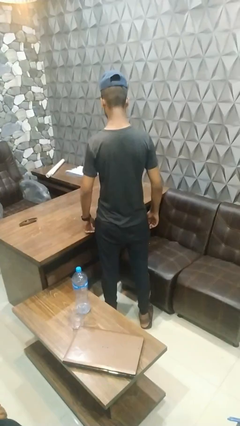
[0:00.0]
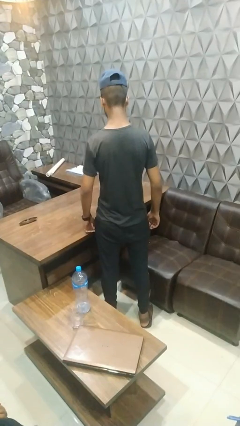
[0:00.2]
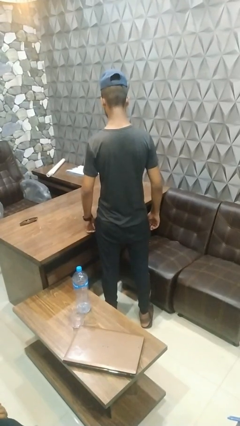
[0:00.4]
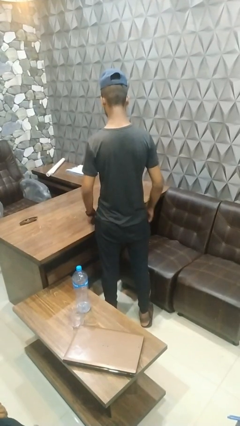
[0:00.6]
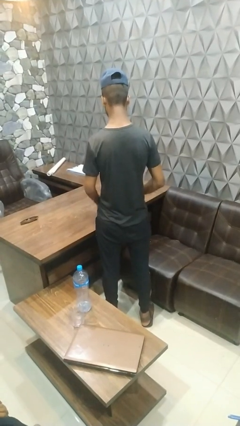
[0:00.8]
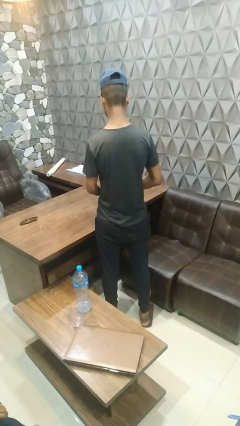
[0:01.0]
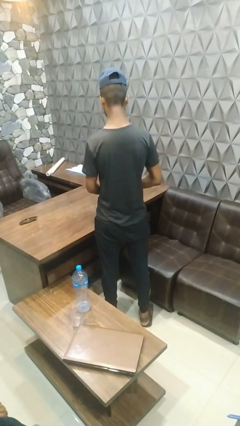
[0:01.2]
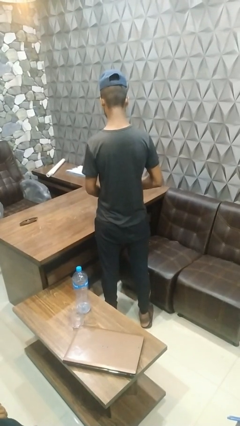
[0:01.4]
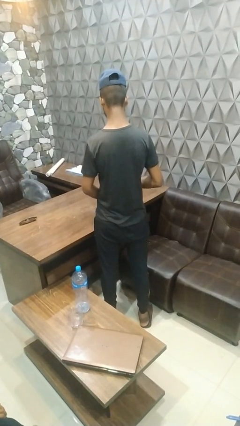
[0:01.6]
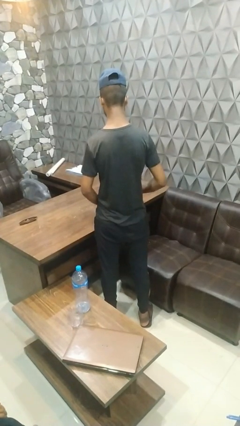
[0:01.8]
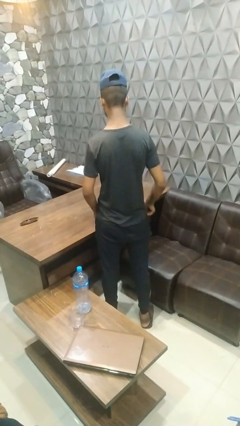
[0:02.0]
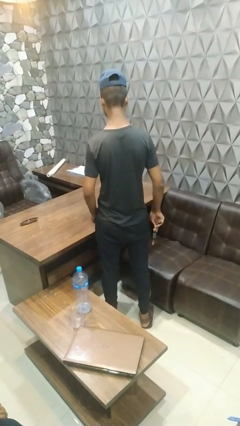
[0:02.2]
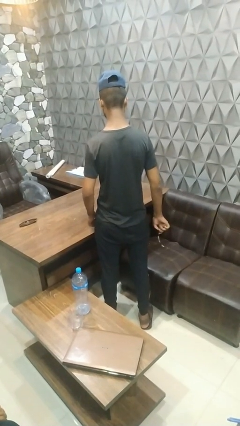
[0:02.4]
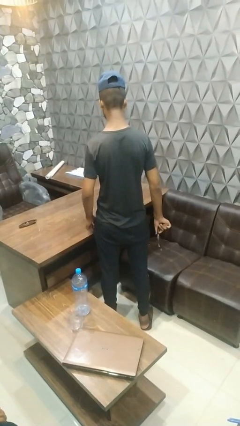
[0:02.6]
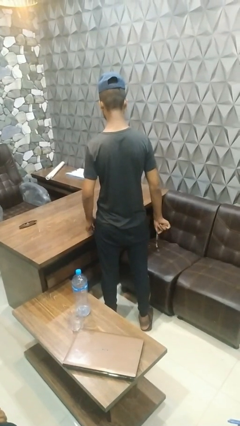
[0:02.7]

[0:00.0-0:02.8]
person takes off wristwatch

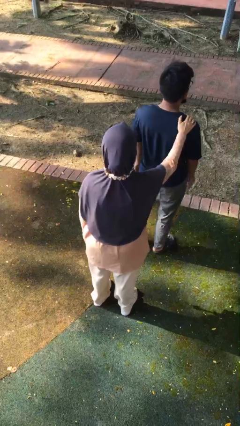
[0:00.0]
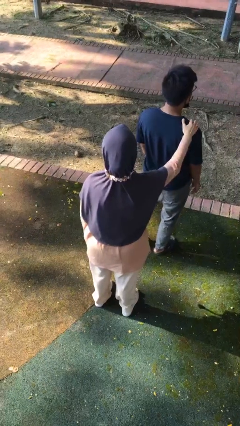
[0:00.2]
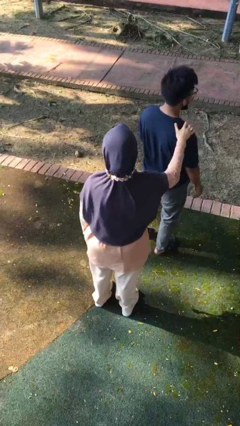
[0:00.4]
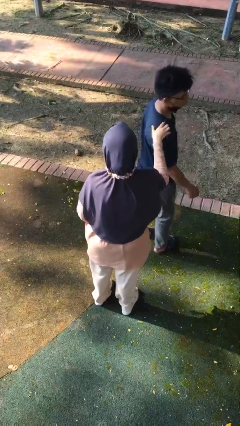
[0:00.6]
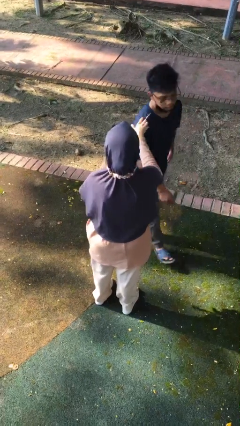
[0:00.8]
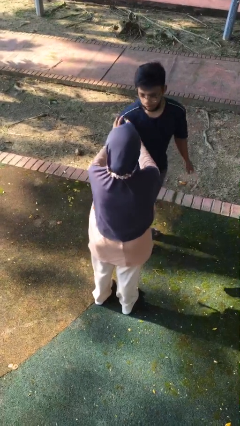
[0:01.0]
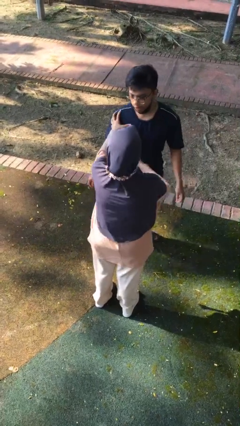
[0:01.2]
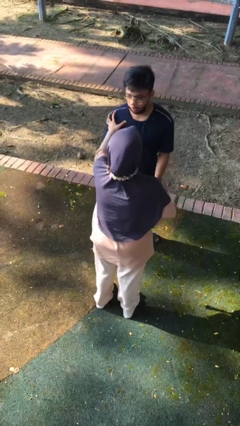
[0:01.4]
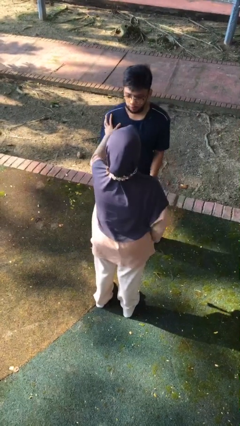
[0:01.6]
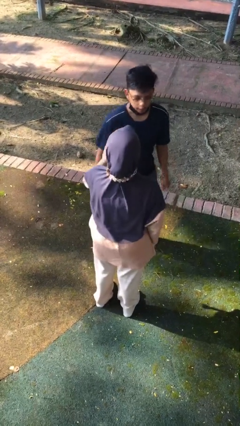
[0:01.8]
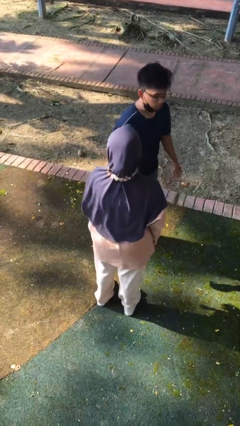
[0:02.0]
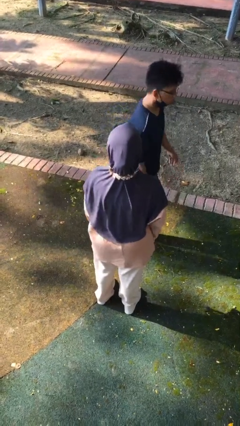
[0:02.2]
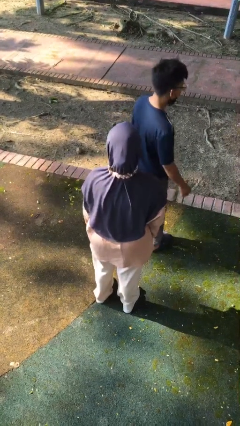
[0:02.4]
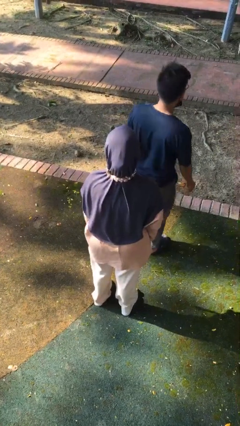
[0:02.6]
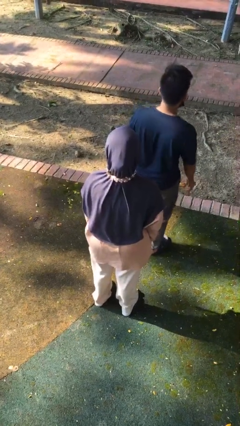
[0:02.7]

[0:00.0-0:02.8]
person spins person around

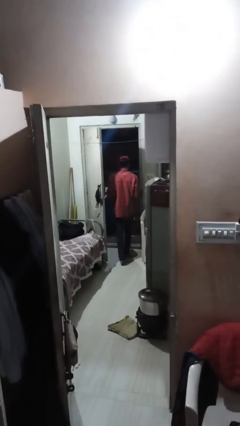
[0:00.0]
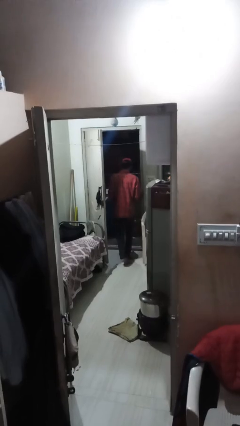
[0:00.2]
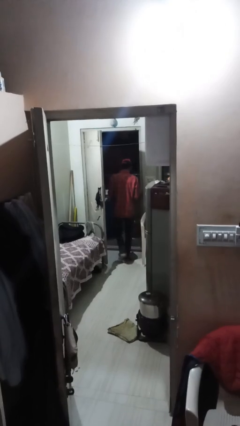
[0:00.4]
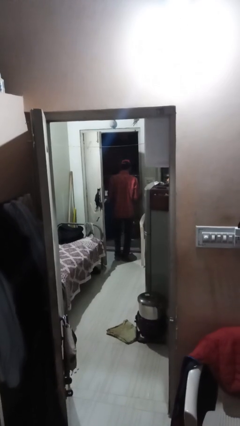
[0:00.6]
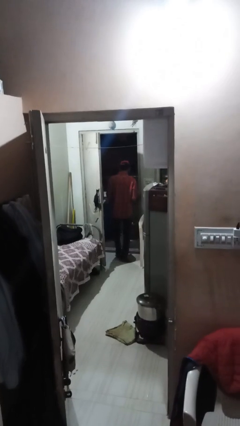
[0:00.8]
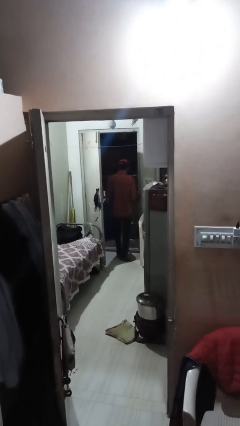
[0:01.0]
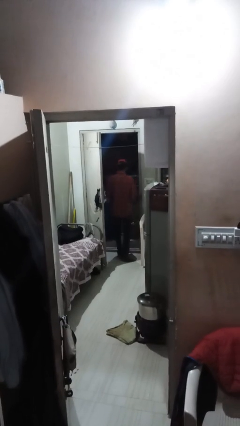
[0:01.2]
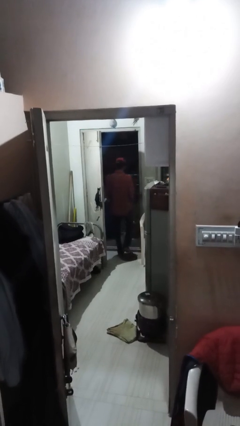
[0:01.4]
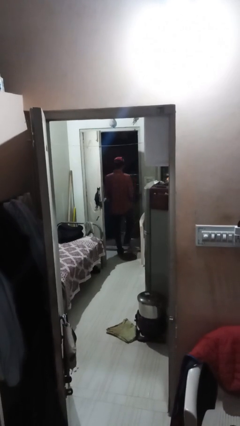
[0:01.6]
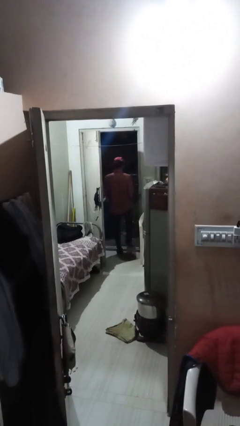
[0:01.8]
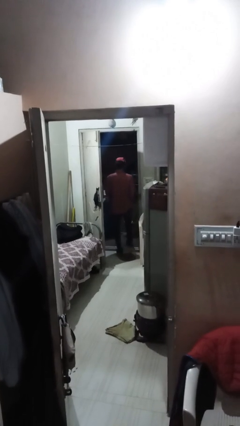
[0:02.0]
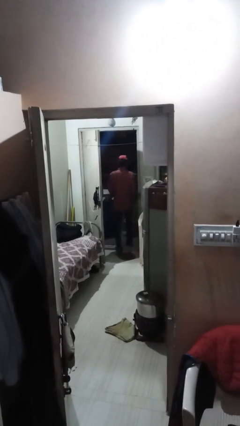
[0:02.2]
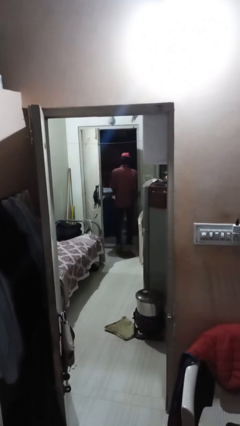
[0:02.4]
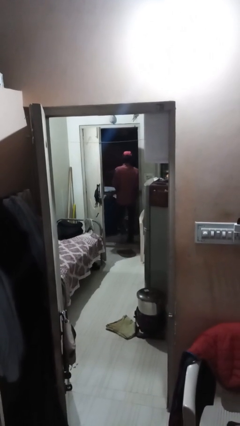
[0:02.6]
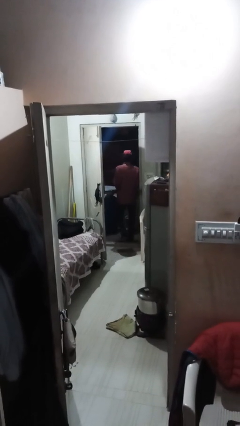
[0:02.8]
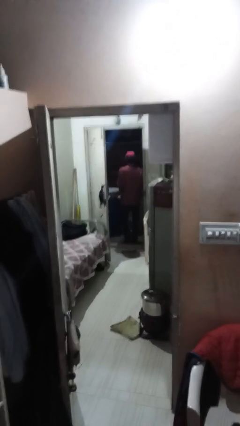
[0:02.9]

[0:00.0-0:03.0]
person exits scene through structure

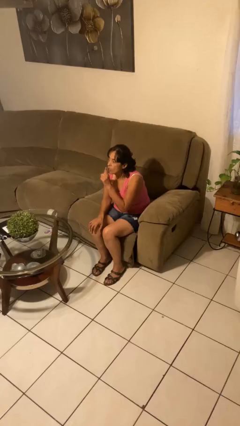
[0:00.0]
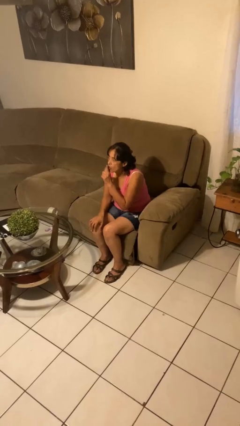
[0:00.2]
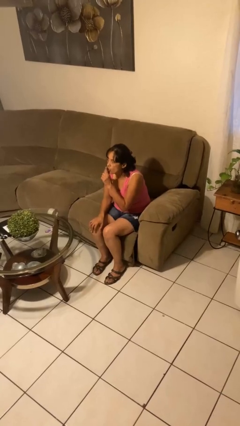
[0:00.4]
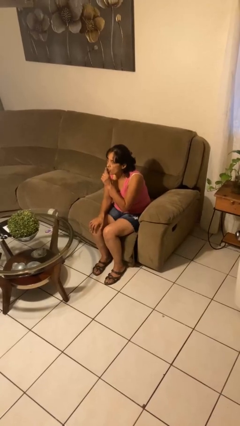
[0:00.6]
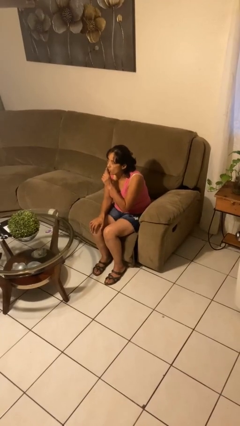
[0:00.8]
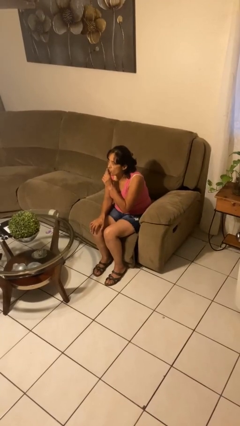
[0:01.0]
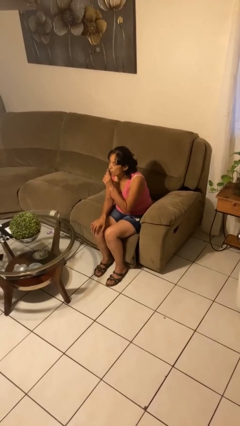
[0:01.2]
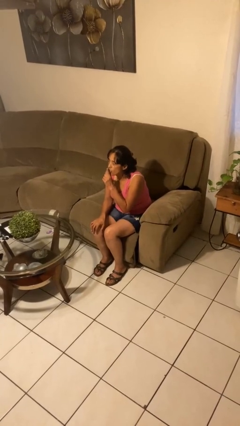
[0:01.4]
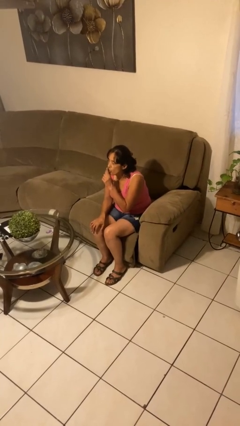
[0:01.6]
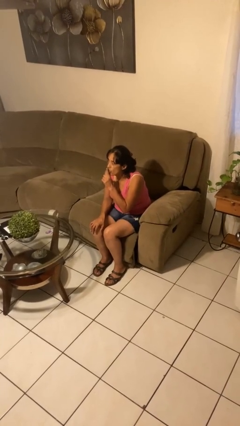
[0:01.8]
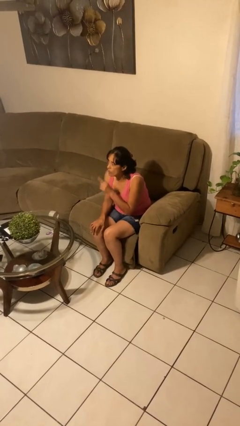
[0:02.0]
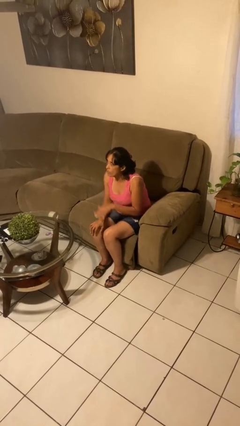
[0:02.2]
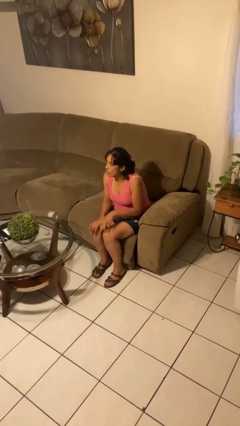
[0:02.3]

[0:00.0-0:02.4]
person gestures be quiet

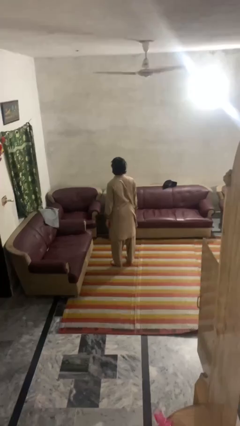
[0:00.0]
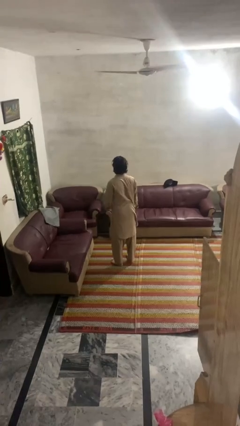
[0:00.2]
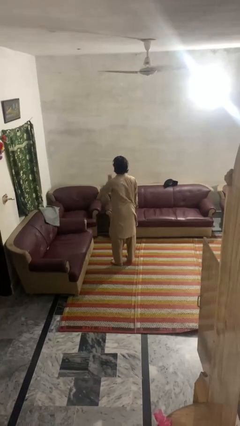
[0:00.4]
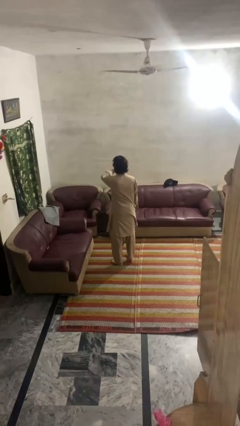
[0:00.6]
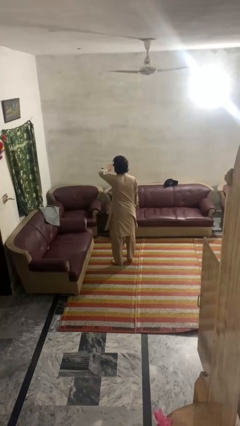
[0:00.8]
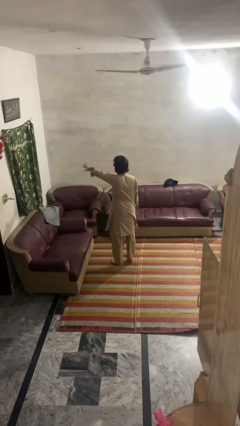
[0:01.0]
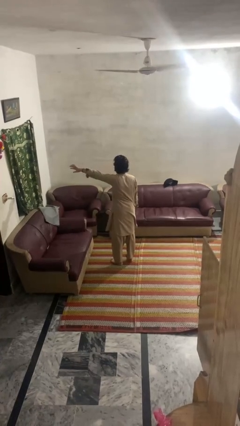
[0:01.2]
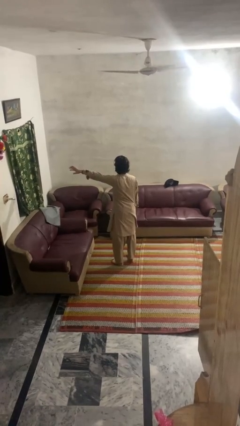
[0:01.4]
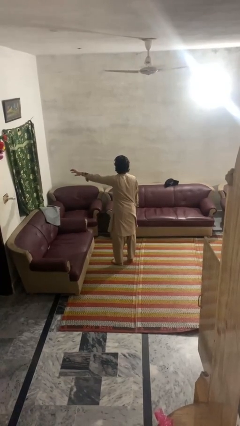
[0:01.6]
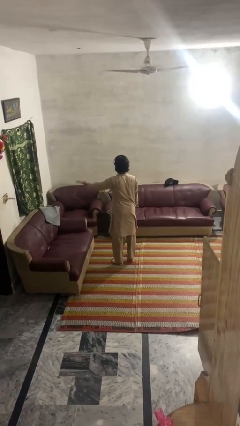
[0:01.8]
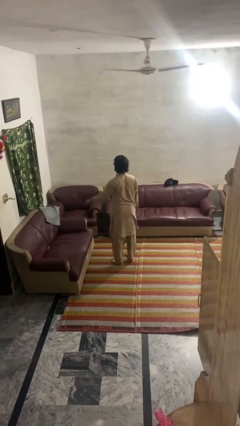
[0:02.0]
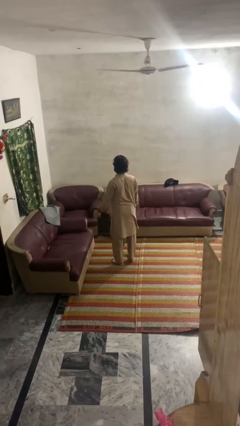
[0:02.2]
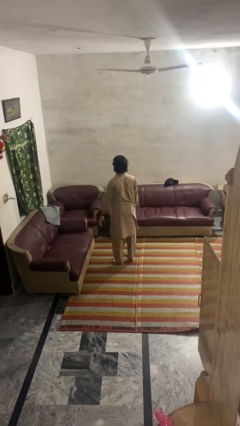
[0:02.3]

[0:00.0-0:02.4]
person gestures swipe left

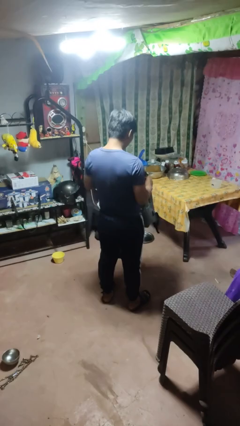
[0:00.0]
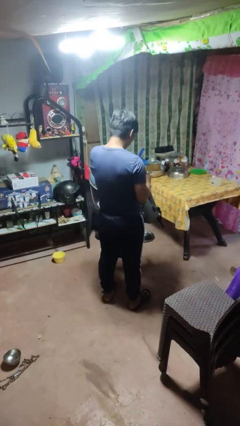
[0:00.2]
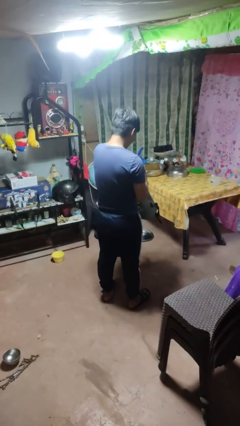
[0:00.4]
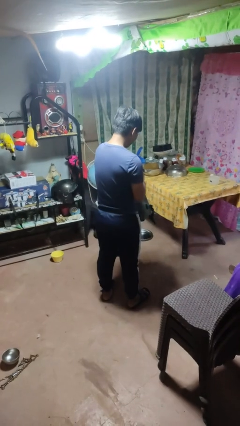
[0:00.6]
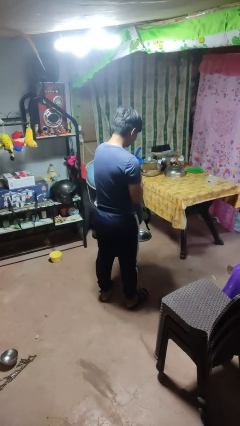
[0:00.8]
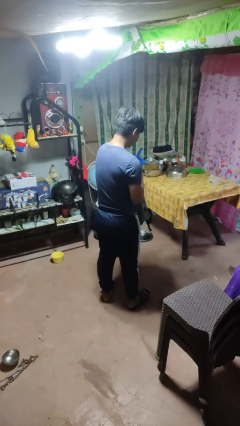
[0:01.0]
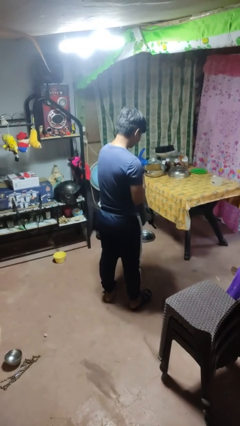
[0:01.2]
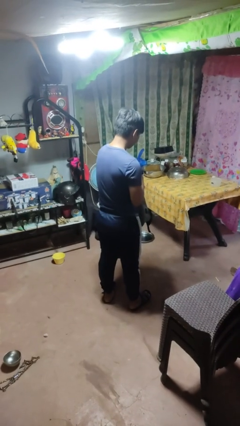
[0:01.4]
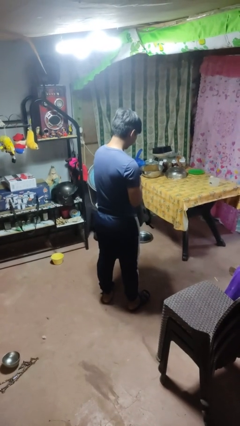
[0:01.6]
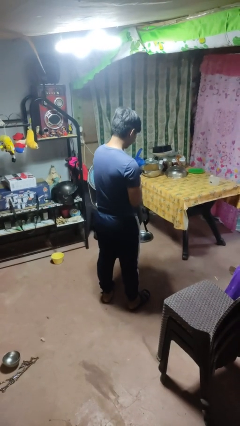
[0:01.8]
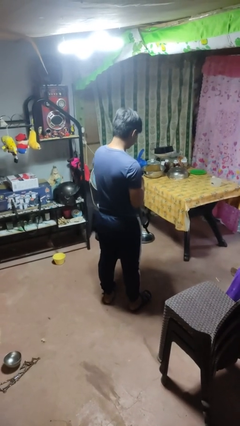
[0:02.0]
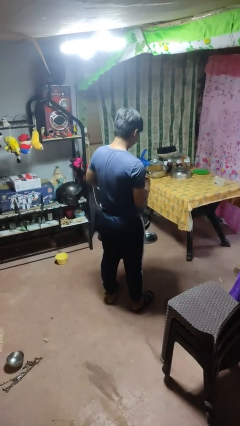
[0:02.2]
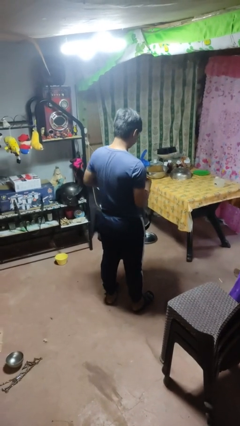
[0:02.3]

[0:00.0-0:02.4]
person searches in bag

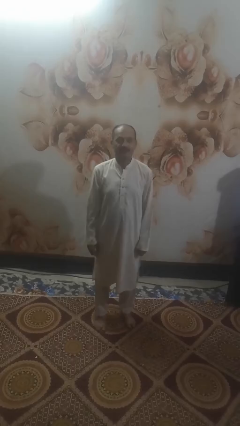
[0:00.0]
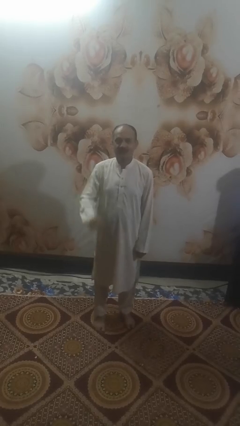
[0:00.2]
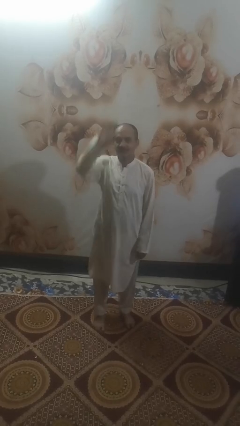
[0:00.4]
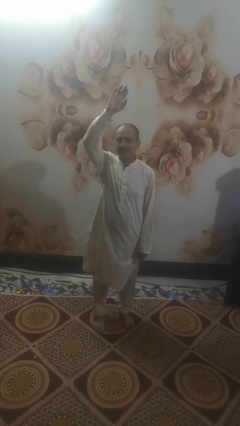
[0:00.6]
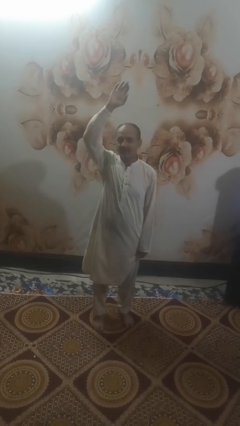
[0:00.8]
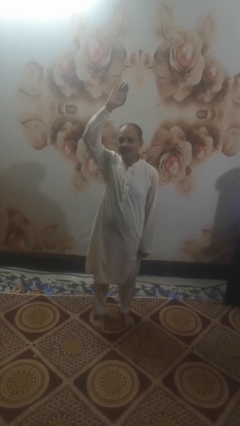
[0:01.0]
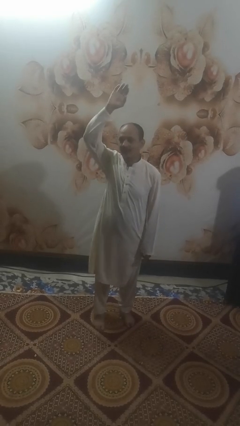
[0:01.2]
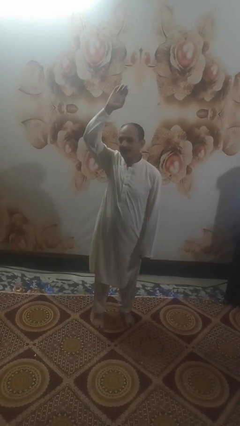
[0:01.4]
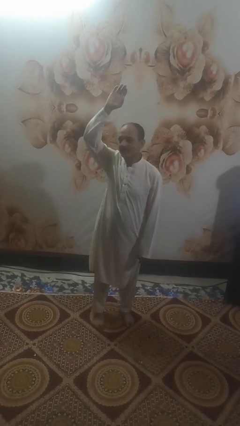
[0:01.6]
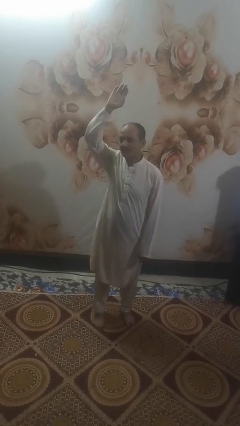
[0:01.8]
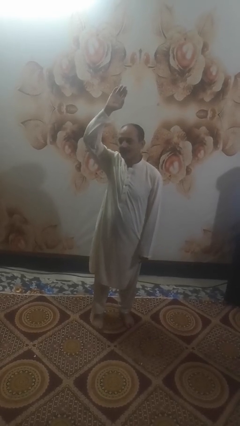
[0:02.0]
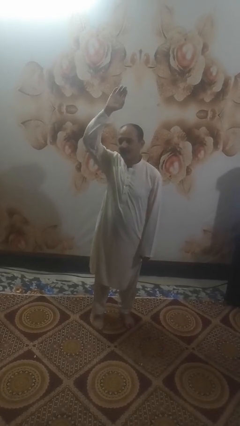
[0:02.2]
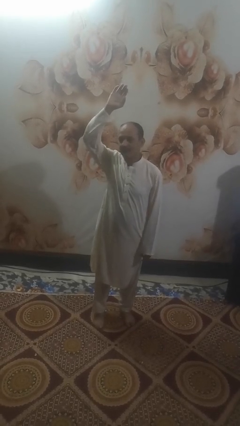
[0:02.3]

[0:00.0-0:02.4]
person gestures raise hand
